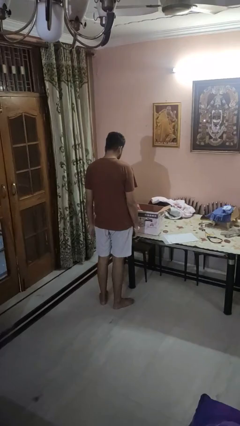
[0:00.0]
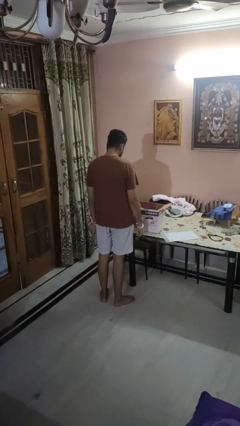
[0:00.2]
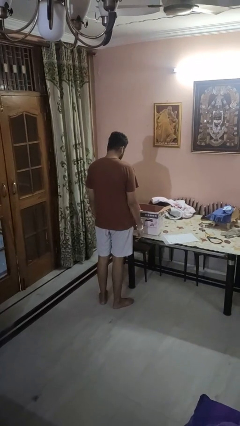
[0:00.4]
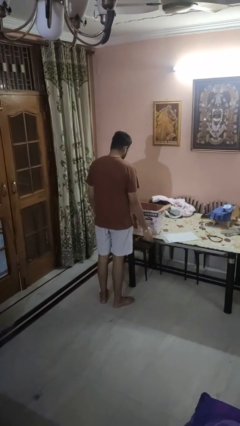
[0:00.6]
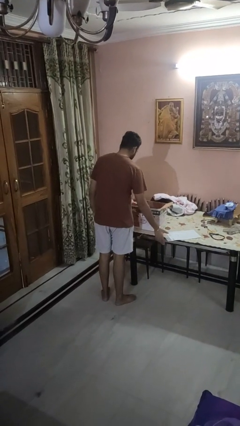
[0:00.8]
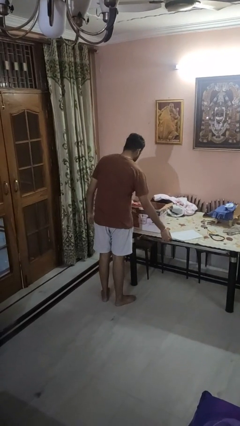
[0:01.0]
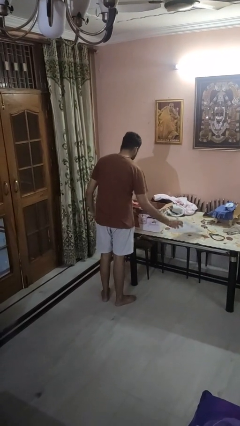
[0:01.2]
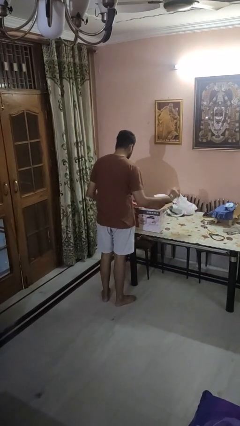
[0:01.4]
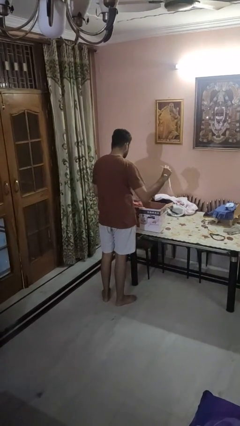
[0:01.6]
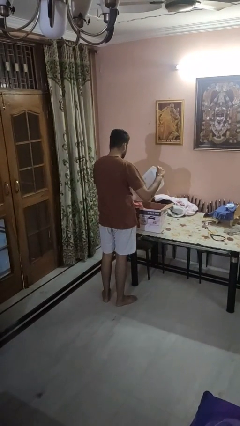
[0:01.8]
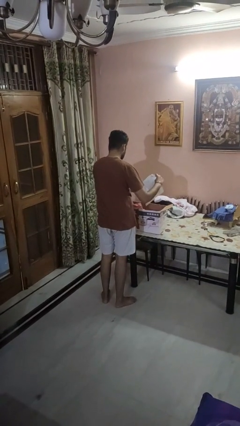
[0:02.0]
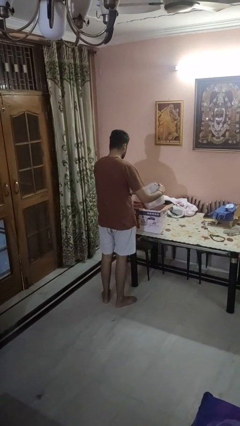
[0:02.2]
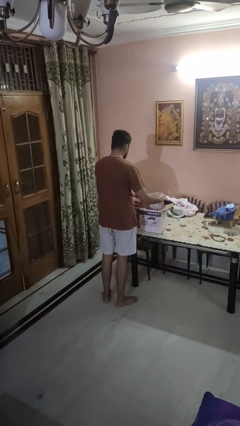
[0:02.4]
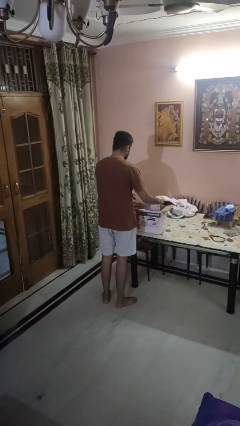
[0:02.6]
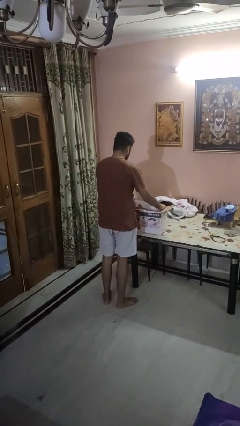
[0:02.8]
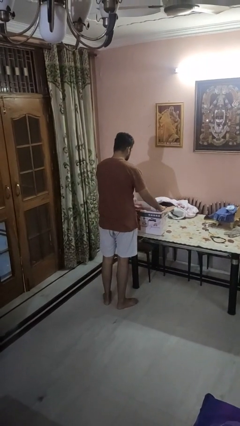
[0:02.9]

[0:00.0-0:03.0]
person puts object into box

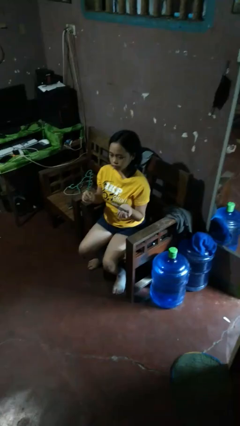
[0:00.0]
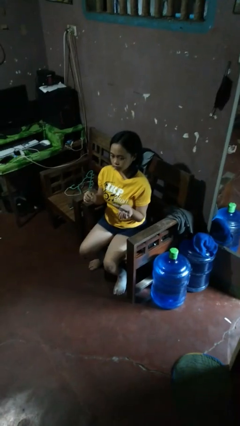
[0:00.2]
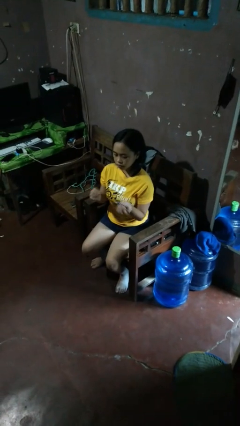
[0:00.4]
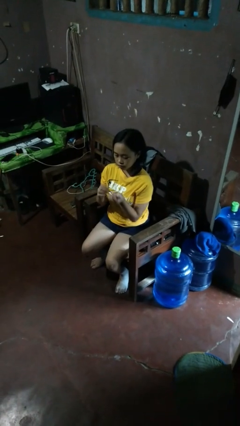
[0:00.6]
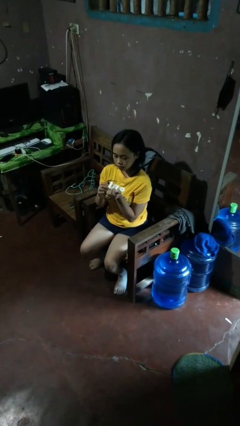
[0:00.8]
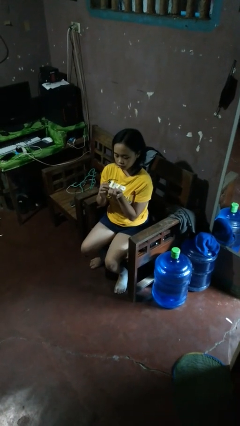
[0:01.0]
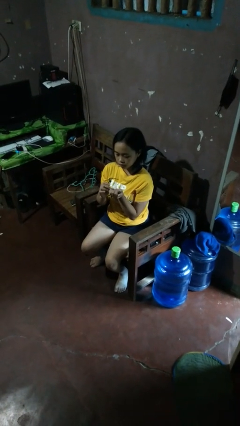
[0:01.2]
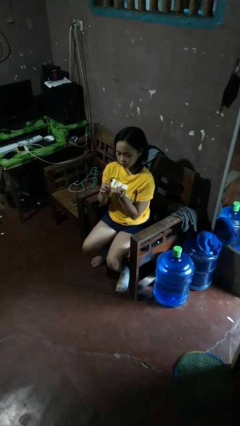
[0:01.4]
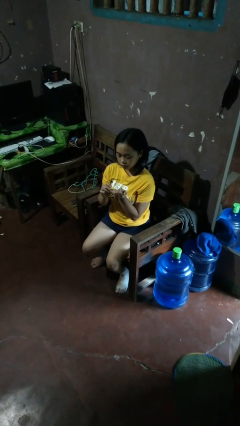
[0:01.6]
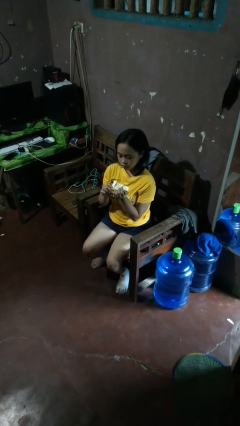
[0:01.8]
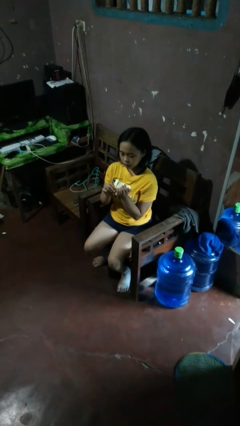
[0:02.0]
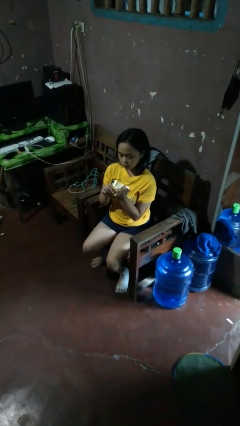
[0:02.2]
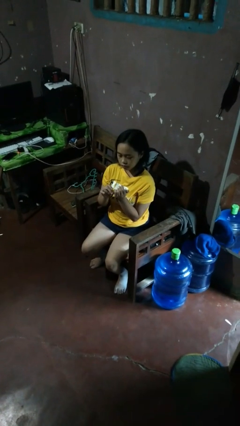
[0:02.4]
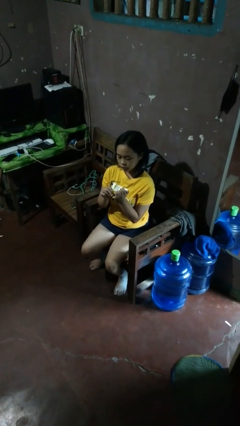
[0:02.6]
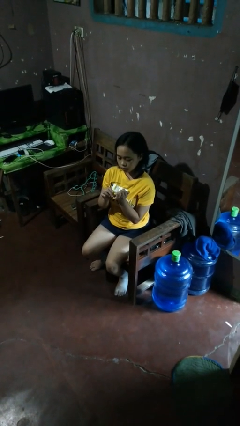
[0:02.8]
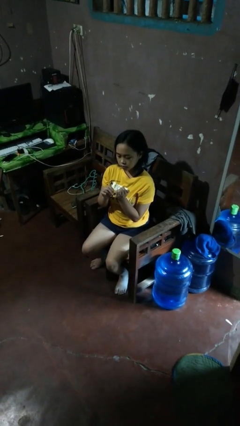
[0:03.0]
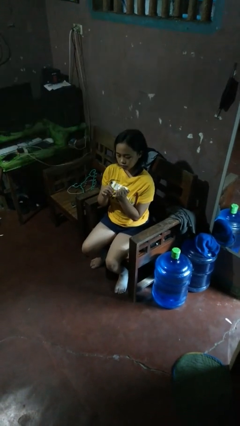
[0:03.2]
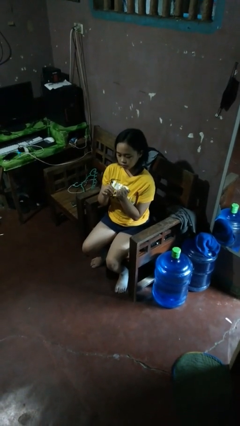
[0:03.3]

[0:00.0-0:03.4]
person clips fingernails

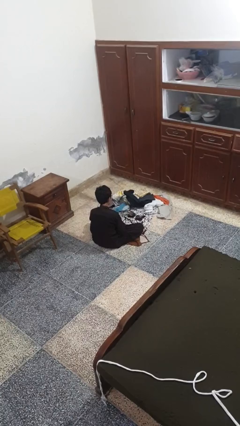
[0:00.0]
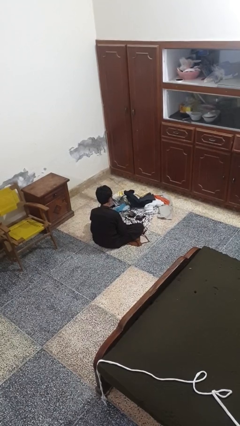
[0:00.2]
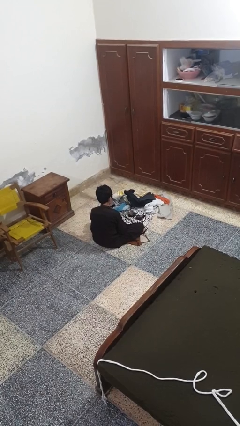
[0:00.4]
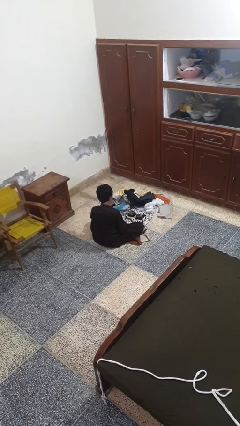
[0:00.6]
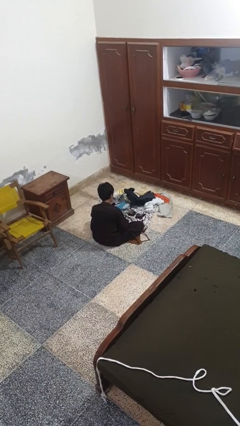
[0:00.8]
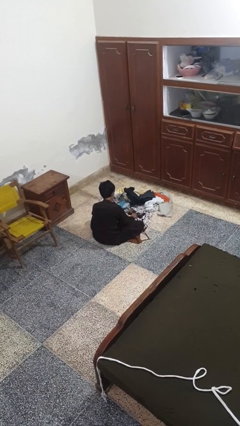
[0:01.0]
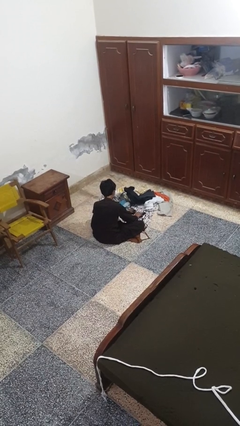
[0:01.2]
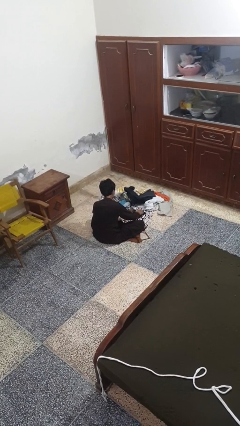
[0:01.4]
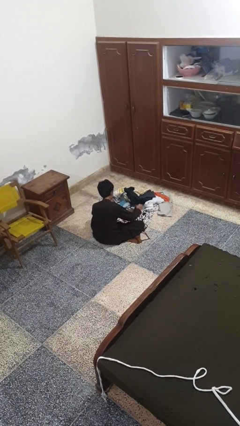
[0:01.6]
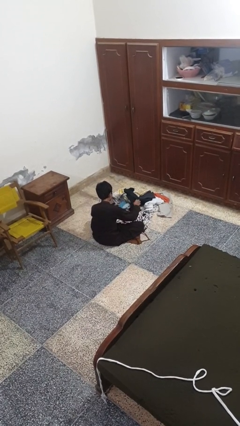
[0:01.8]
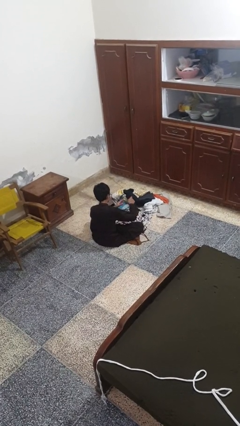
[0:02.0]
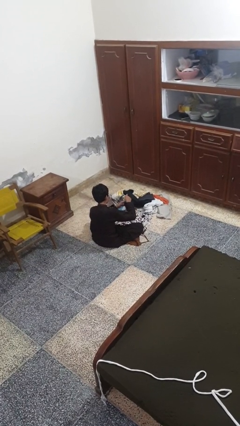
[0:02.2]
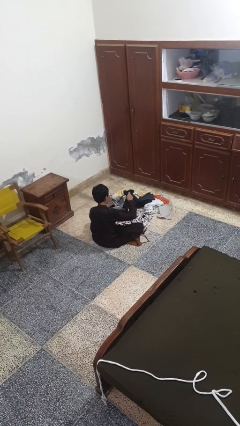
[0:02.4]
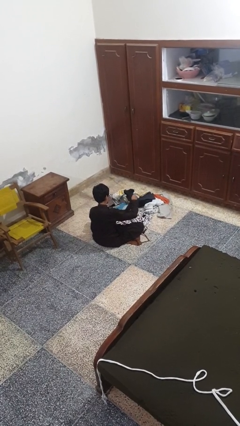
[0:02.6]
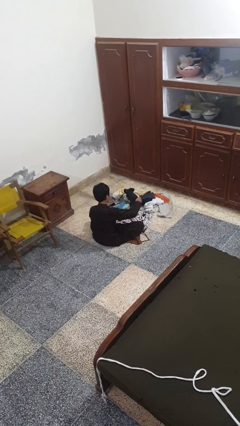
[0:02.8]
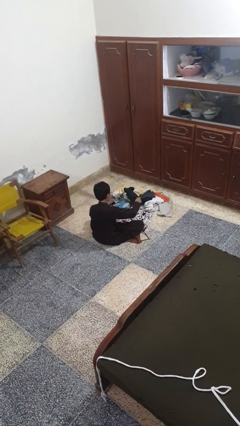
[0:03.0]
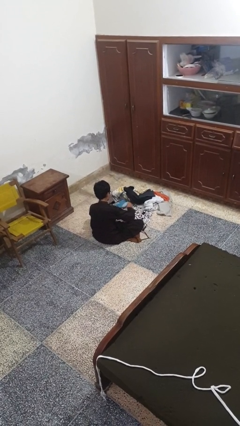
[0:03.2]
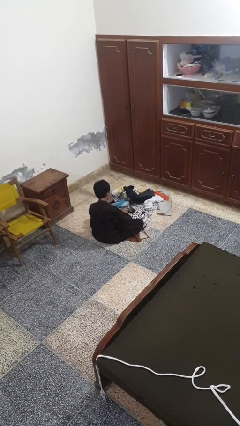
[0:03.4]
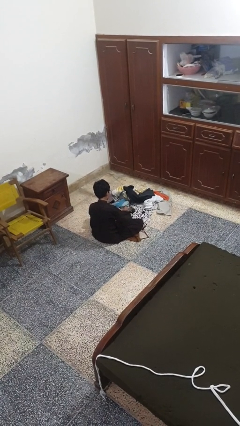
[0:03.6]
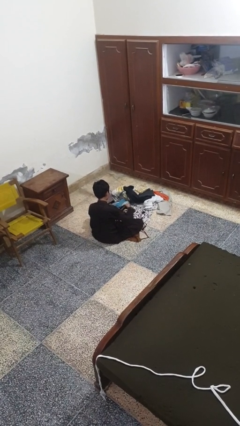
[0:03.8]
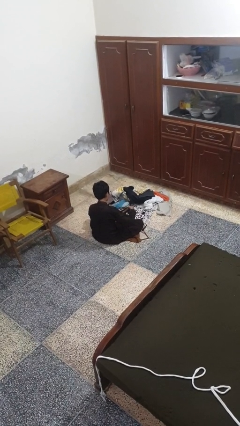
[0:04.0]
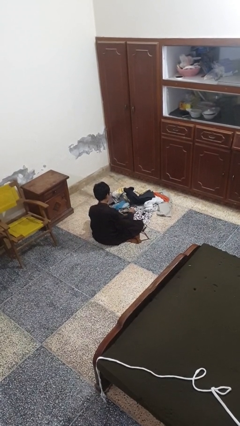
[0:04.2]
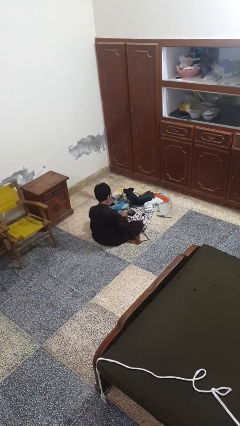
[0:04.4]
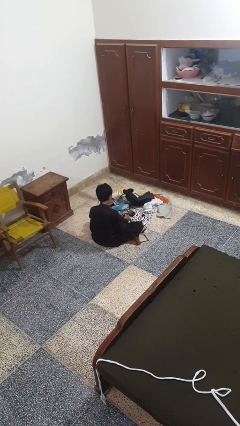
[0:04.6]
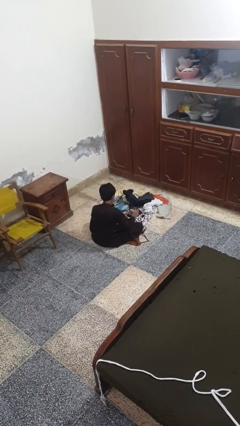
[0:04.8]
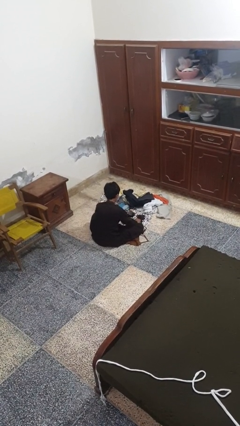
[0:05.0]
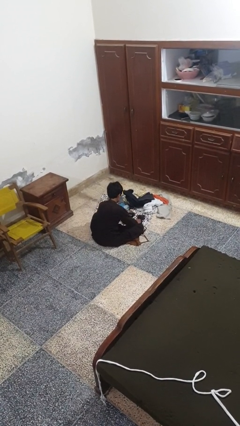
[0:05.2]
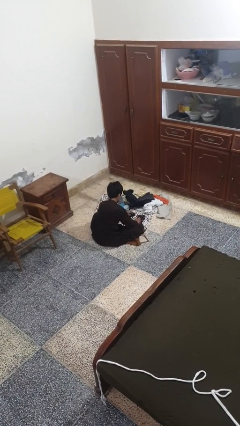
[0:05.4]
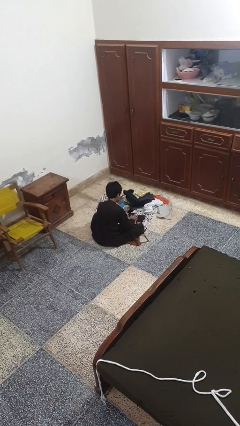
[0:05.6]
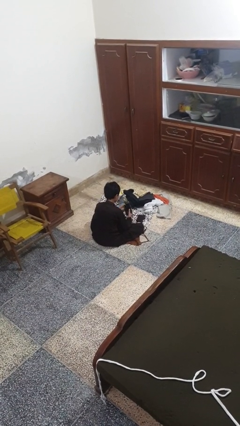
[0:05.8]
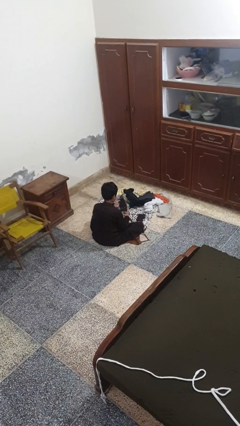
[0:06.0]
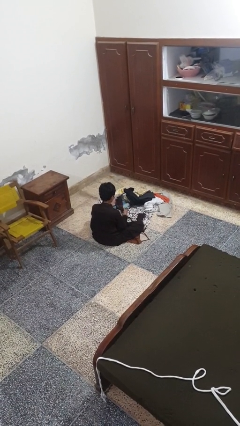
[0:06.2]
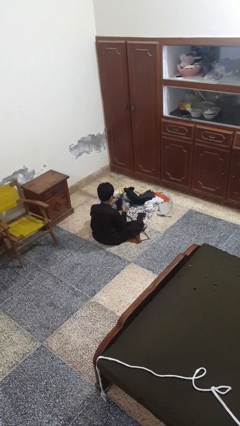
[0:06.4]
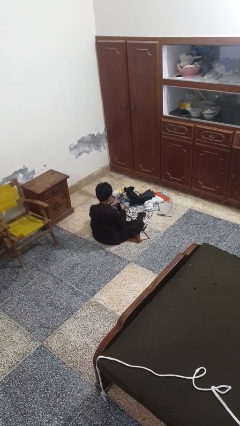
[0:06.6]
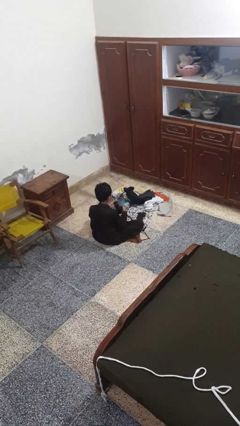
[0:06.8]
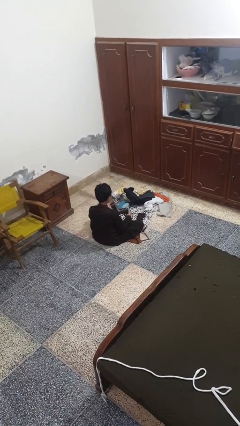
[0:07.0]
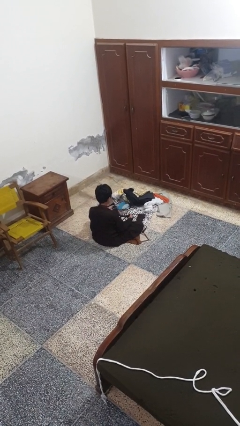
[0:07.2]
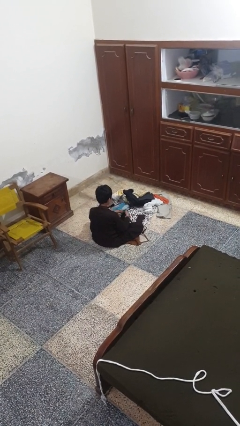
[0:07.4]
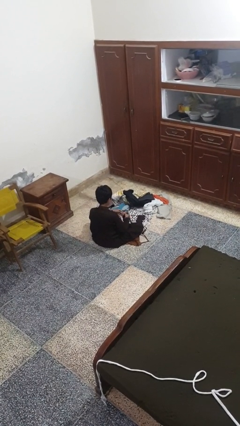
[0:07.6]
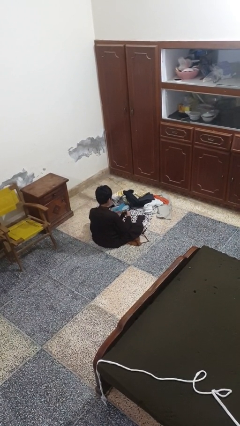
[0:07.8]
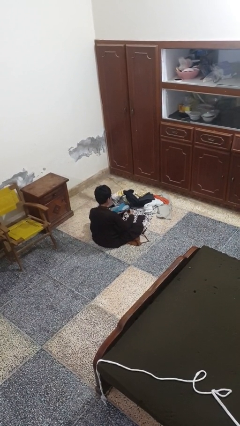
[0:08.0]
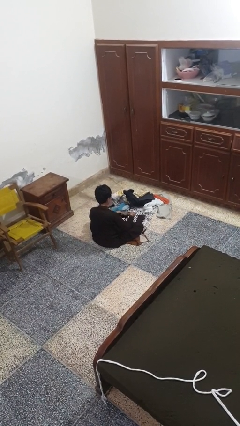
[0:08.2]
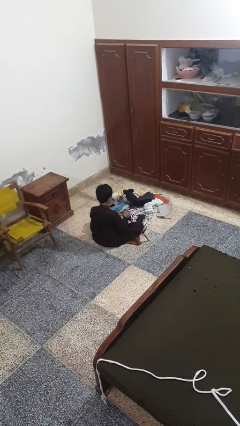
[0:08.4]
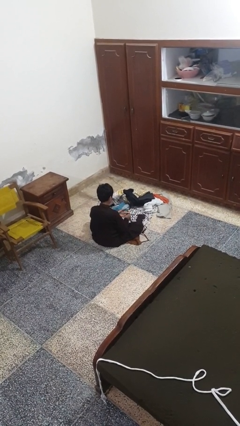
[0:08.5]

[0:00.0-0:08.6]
person folds socks

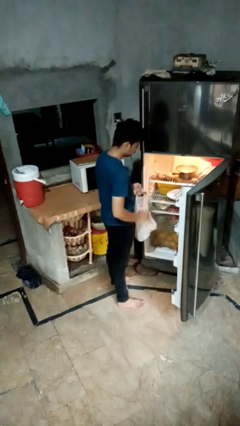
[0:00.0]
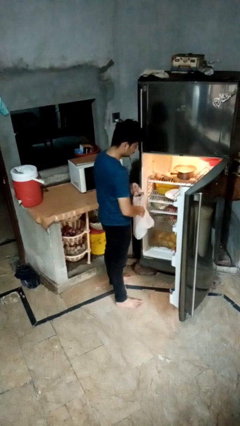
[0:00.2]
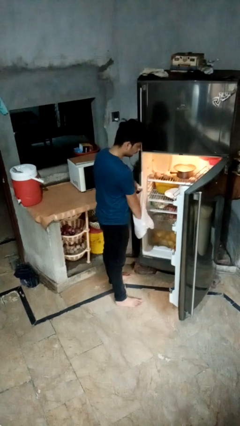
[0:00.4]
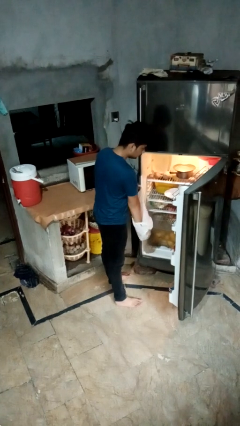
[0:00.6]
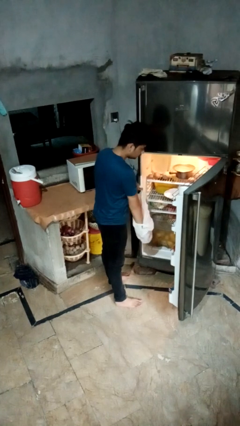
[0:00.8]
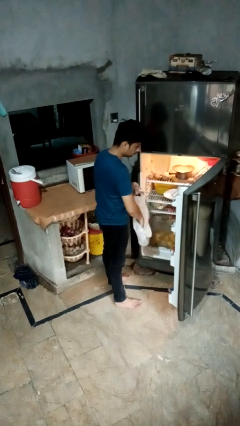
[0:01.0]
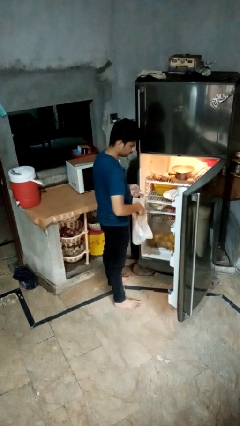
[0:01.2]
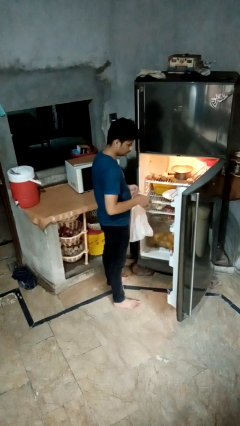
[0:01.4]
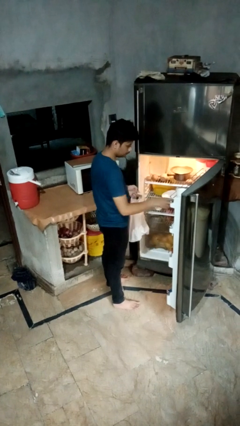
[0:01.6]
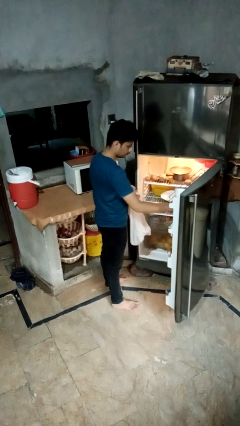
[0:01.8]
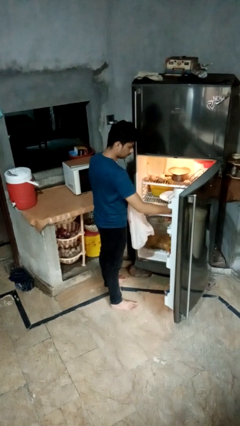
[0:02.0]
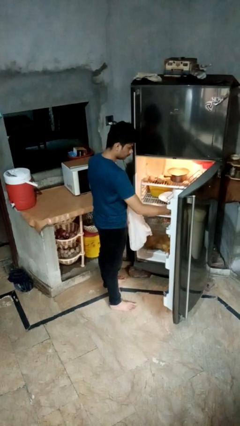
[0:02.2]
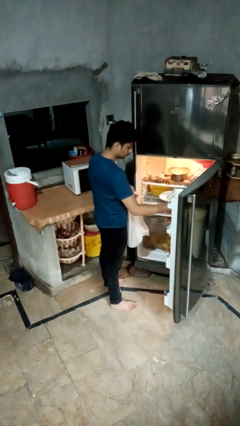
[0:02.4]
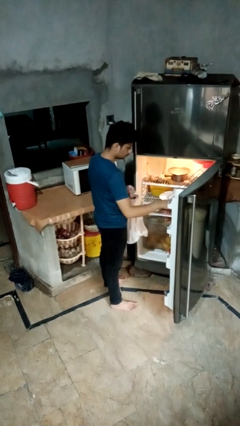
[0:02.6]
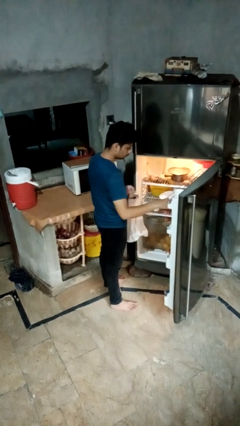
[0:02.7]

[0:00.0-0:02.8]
person loads groceries into refrigerator
